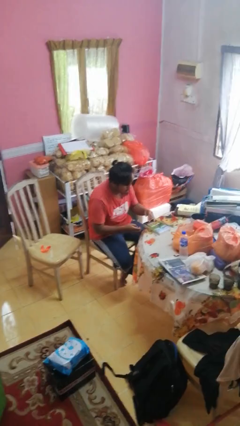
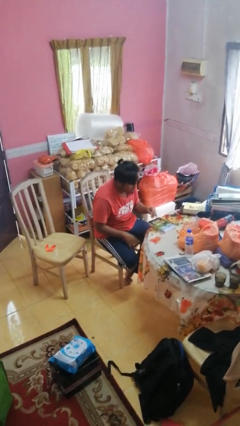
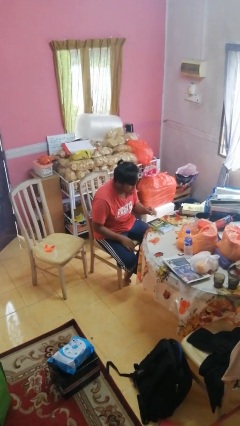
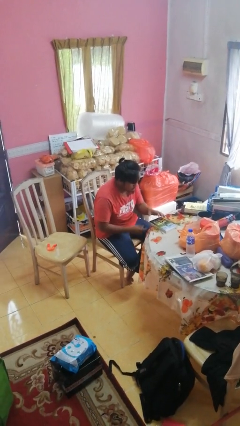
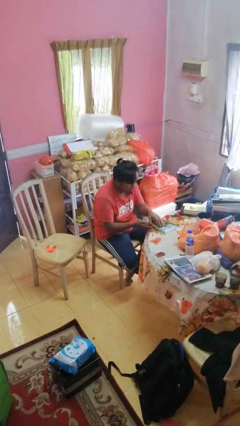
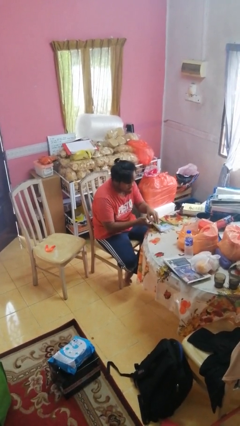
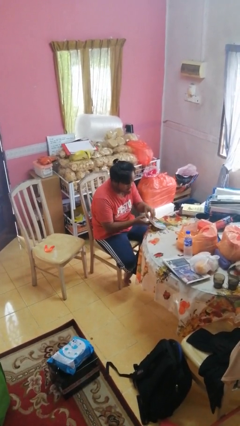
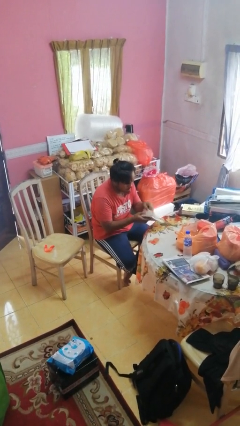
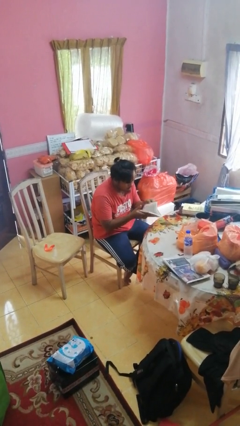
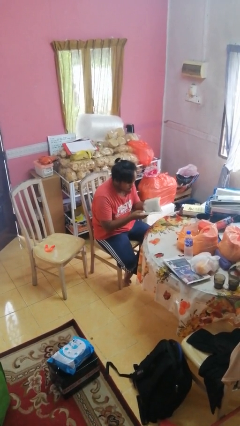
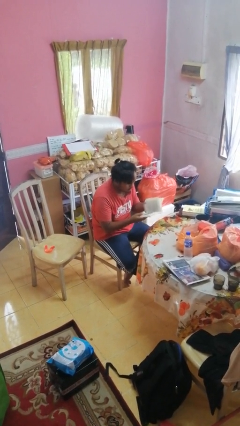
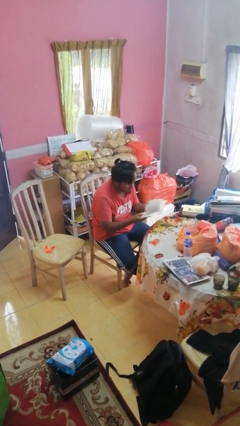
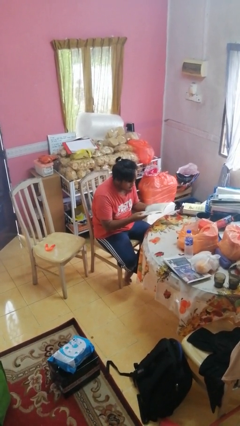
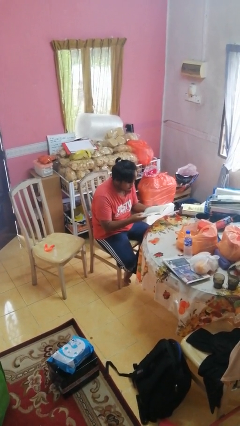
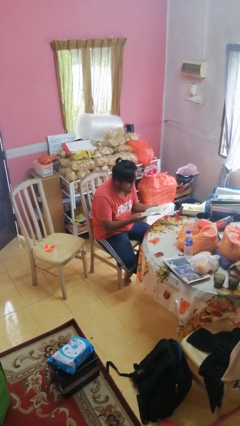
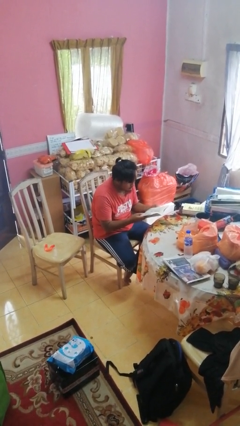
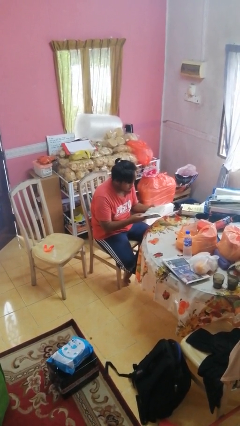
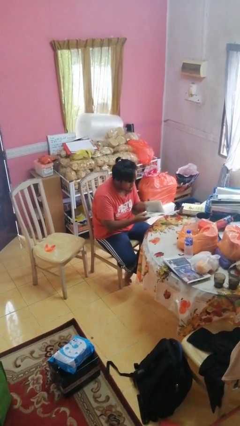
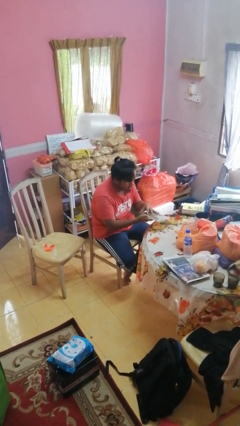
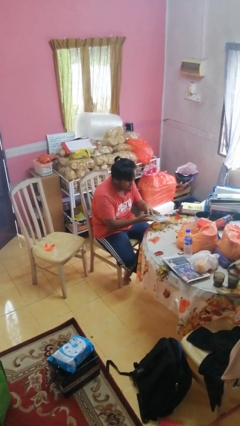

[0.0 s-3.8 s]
person reads book

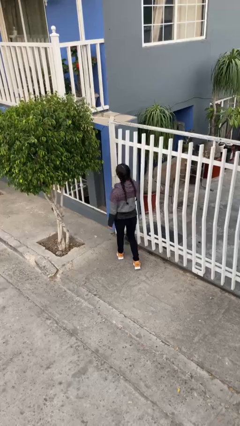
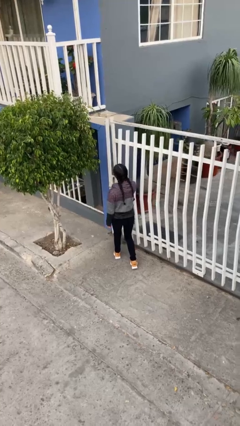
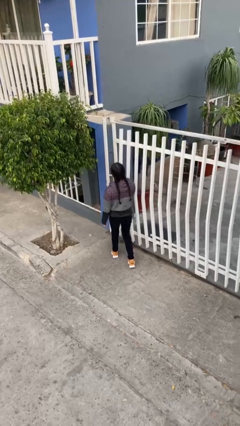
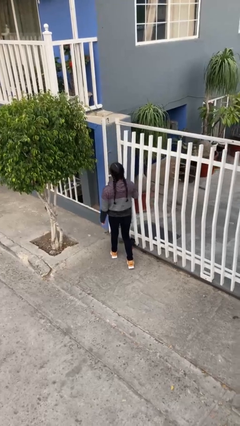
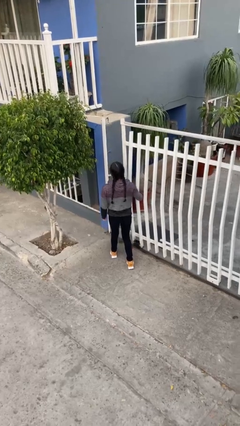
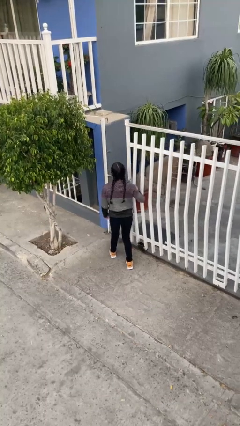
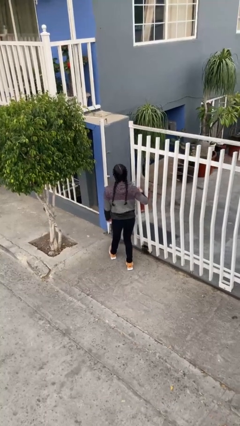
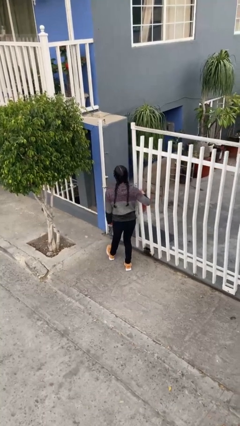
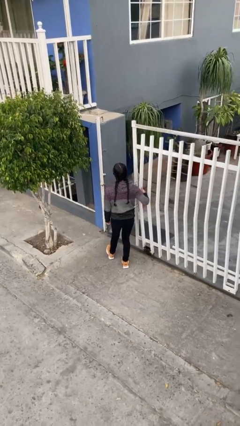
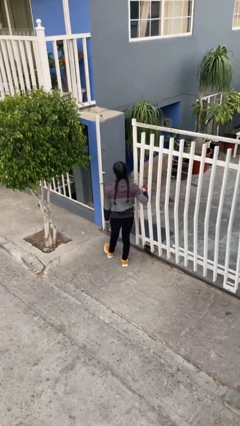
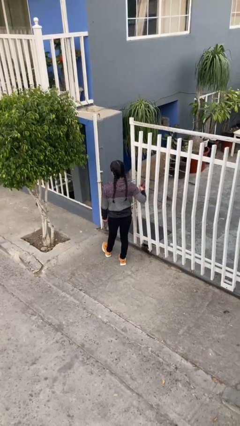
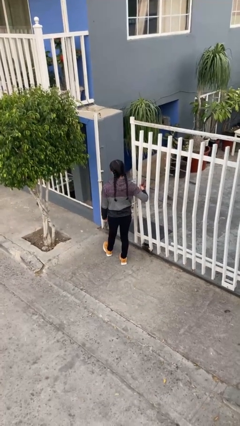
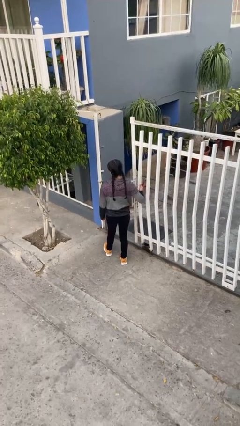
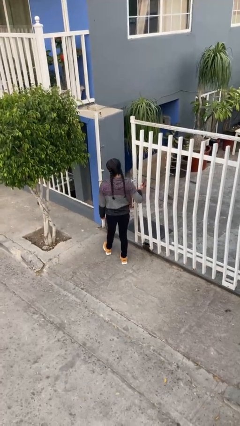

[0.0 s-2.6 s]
person opens facility door

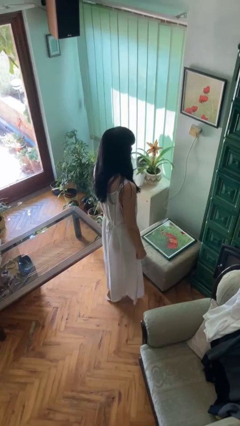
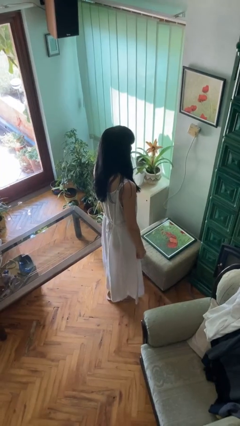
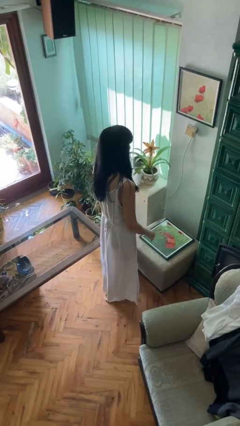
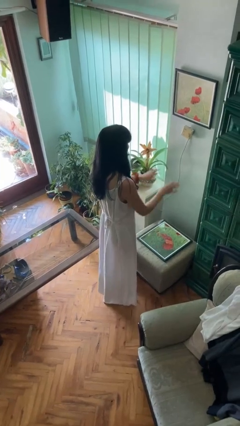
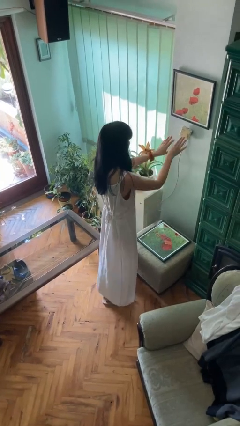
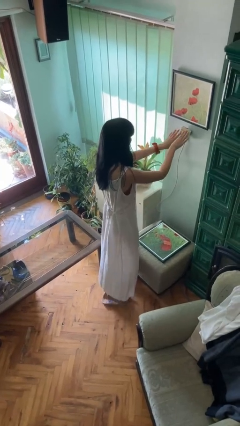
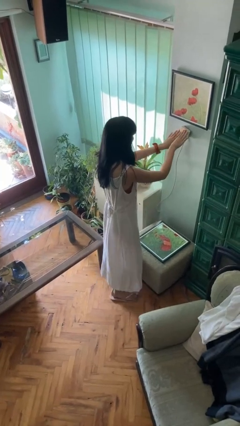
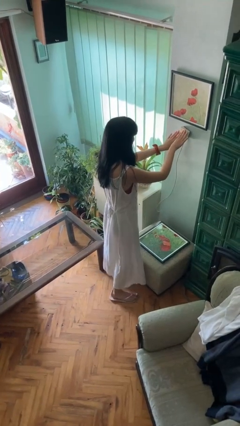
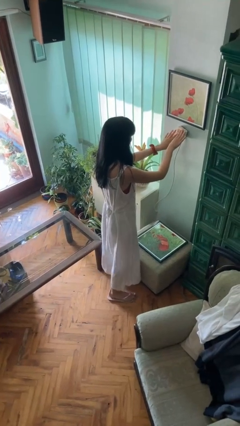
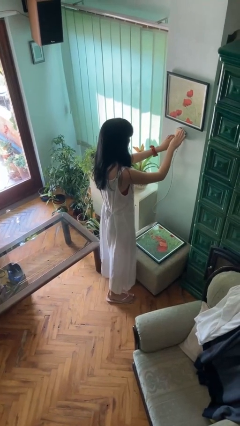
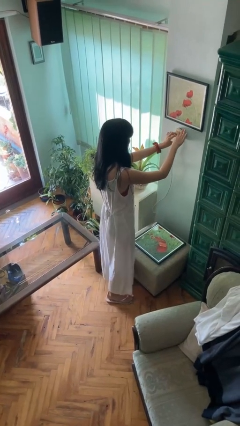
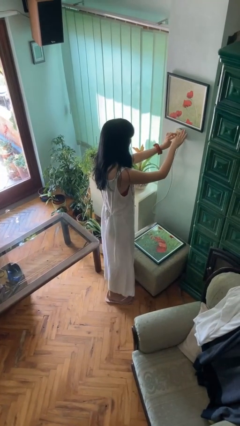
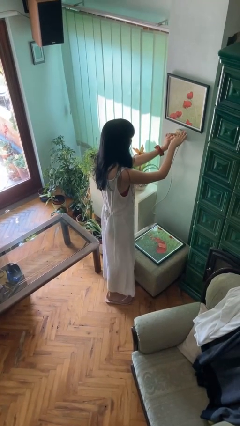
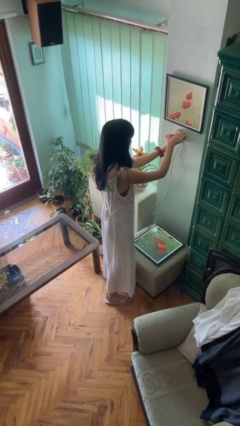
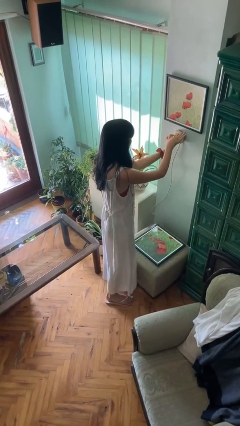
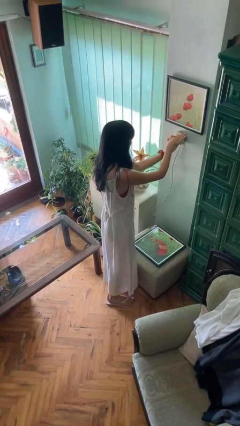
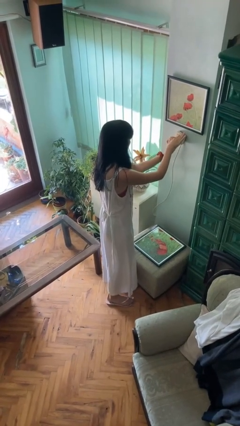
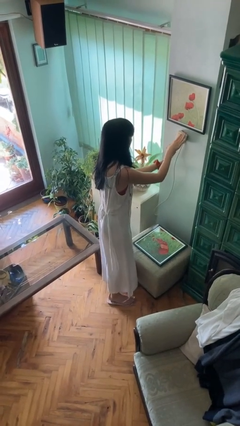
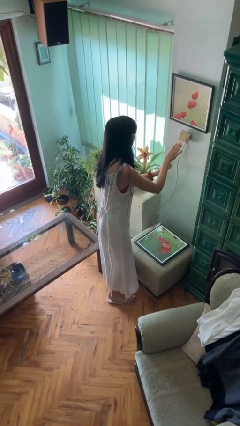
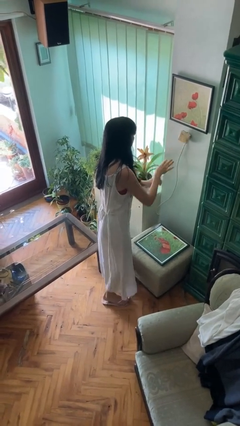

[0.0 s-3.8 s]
person adjusts thermostat

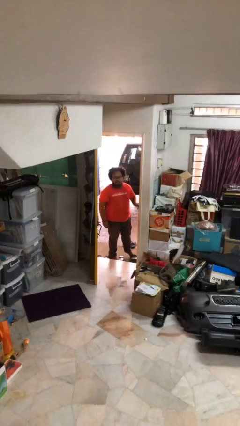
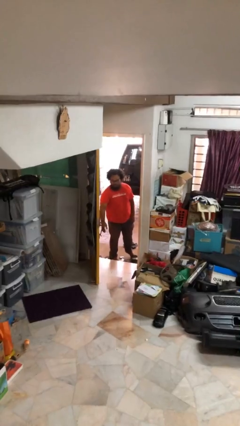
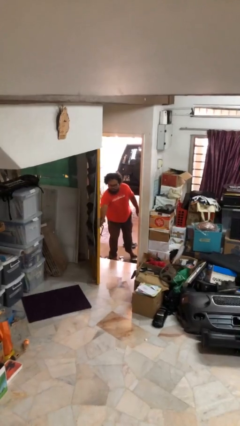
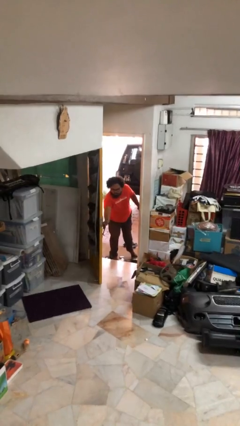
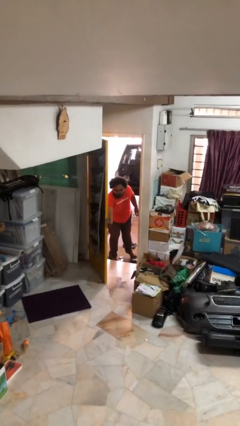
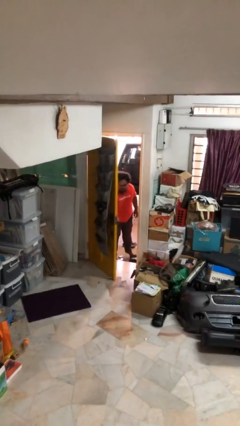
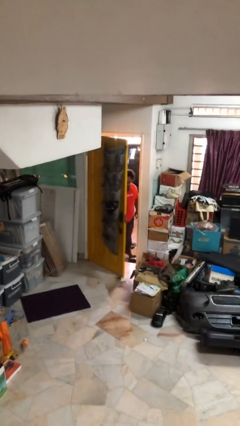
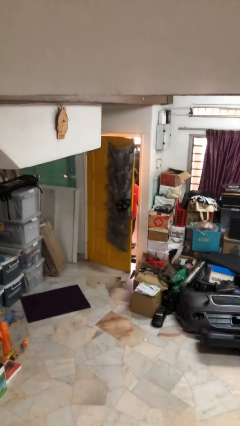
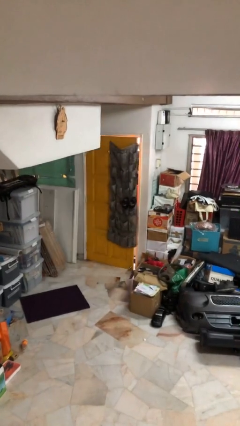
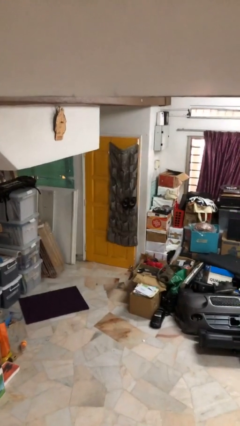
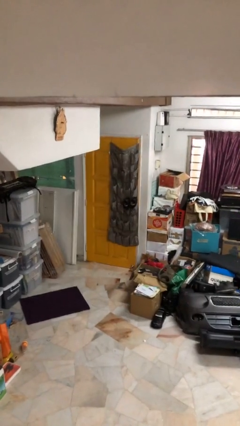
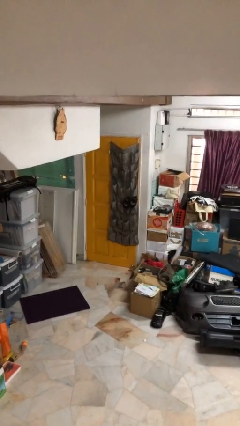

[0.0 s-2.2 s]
person closes facility door

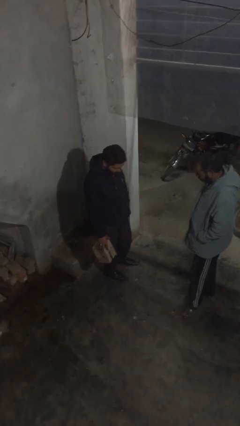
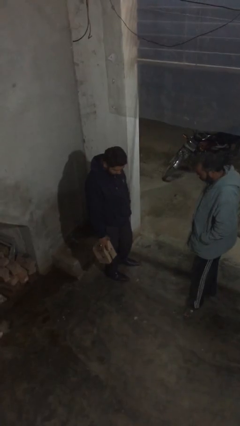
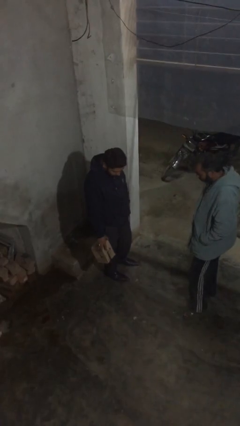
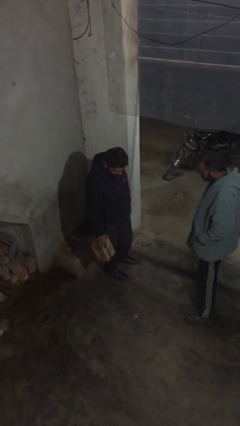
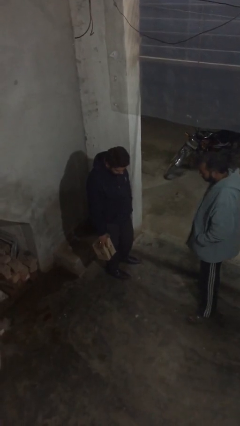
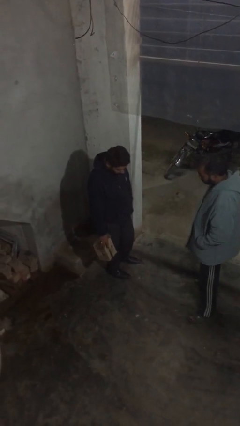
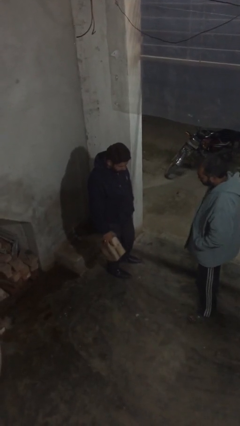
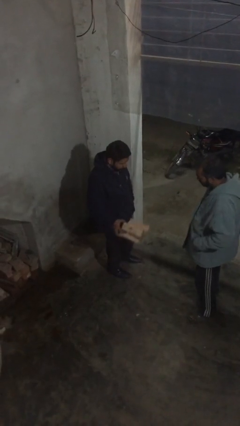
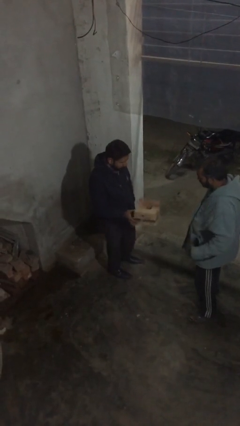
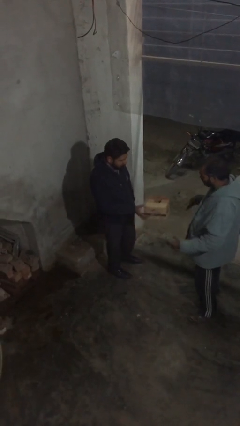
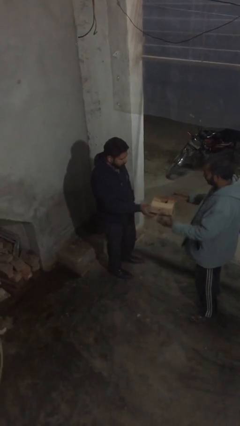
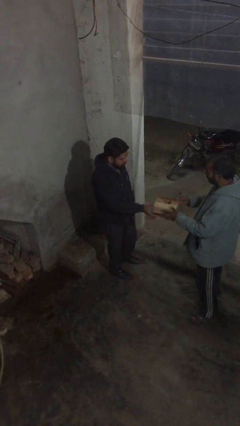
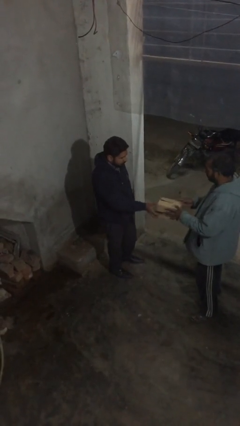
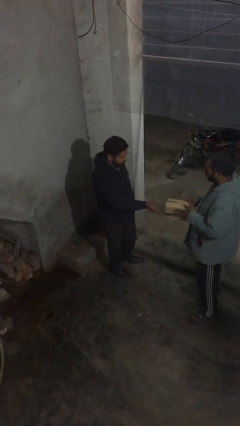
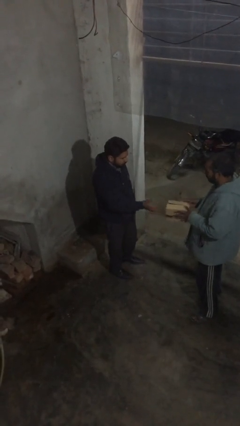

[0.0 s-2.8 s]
person transfers object to person

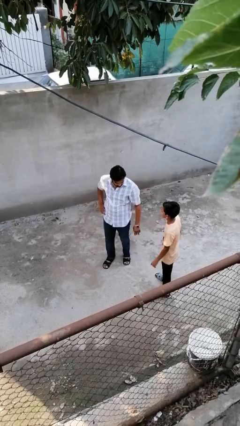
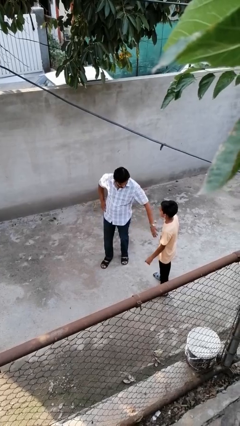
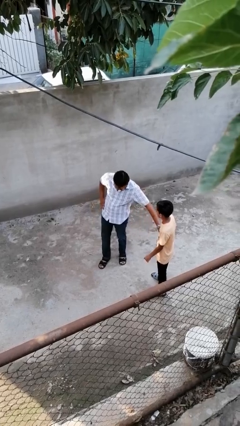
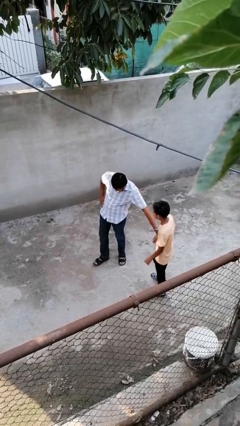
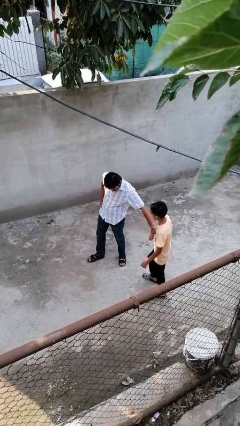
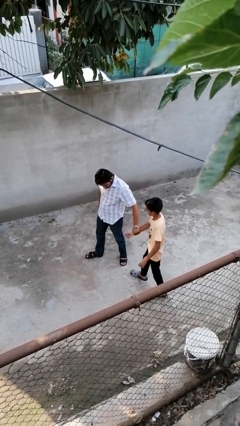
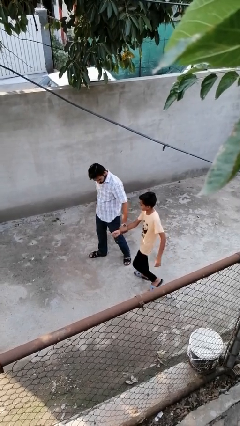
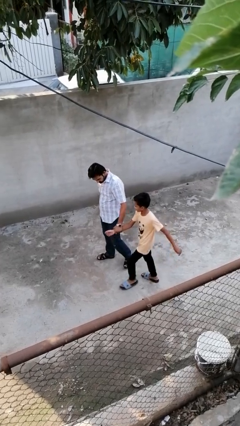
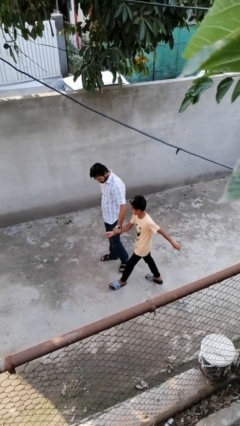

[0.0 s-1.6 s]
person grabs person by forearm
